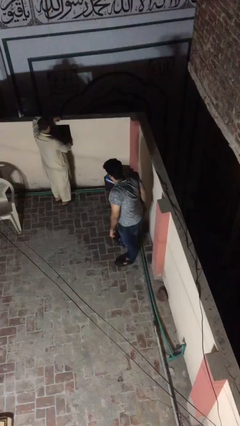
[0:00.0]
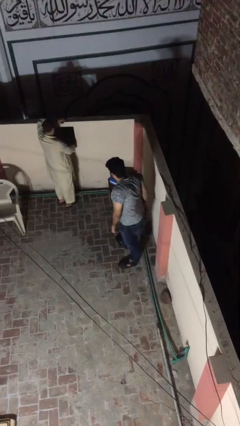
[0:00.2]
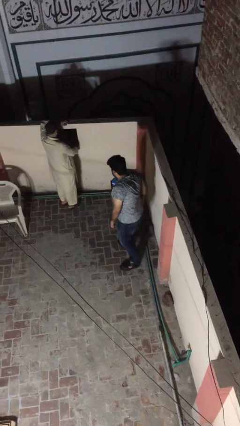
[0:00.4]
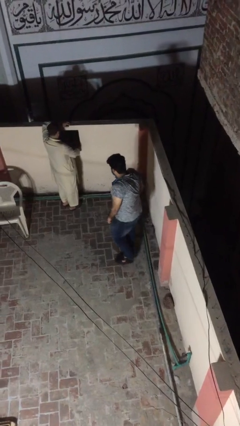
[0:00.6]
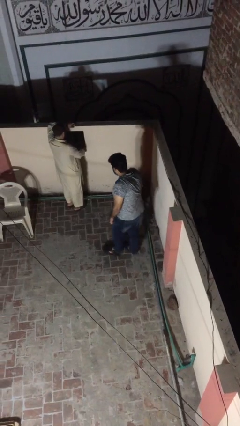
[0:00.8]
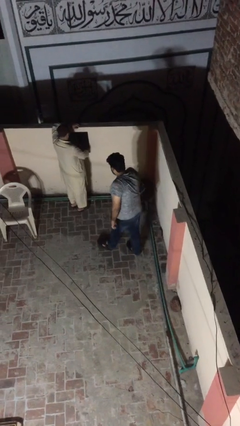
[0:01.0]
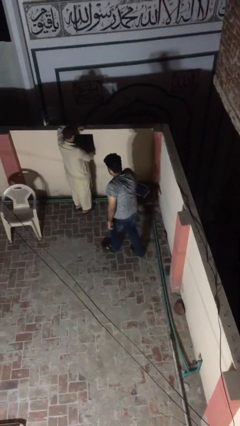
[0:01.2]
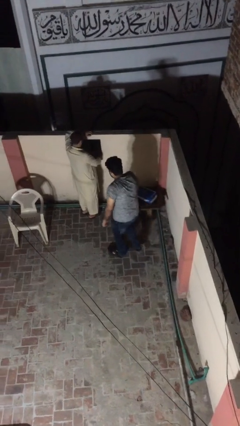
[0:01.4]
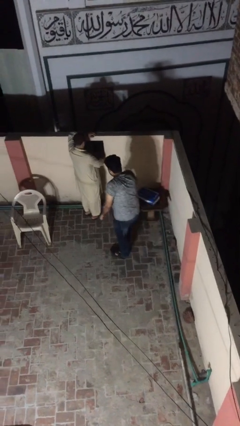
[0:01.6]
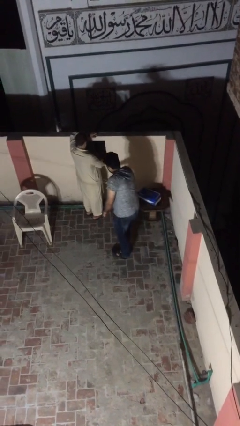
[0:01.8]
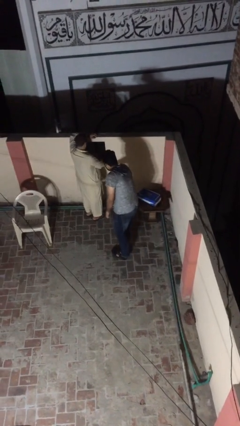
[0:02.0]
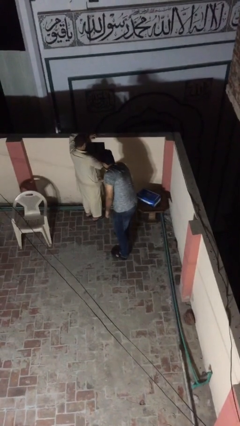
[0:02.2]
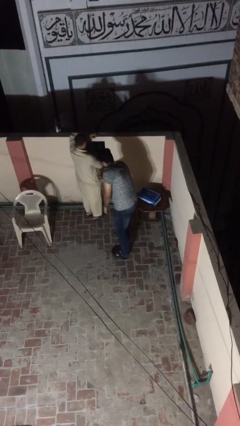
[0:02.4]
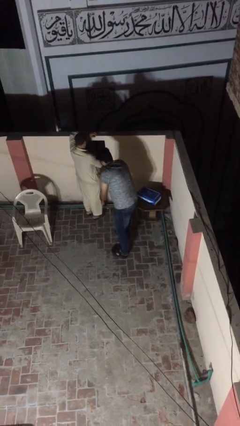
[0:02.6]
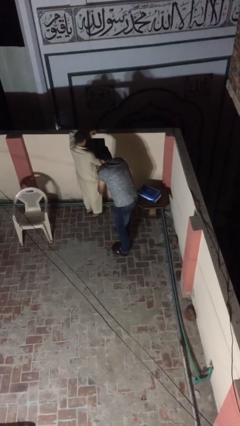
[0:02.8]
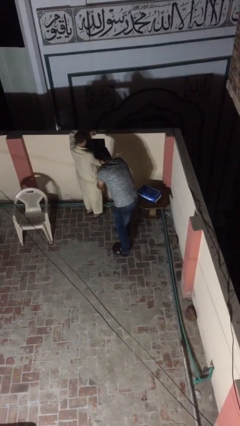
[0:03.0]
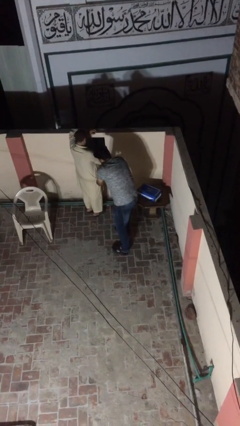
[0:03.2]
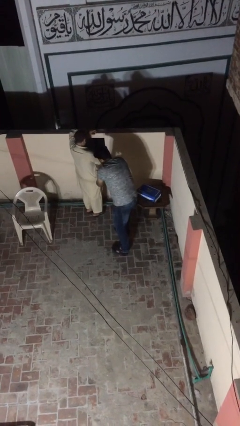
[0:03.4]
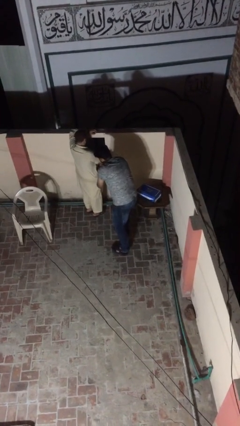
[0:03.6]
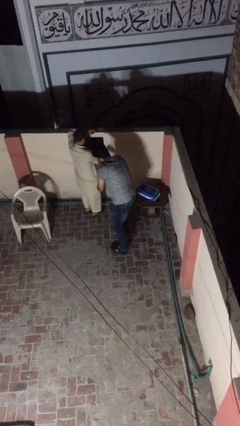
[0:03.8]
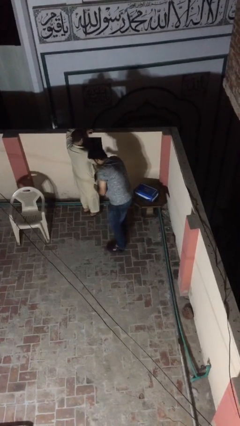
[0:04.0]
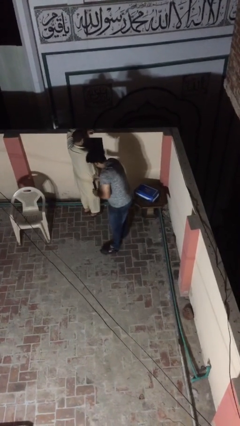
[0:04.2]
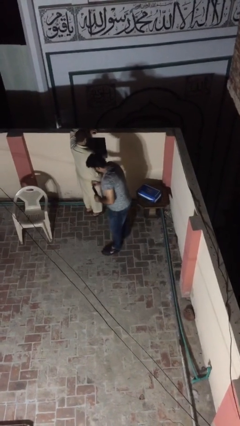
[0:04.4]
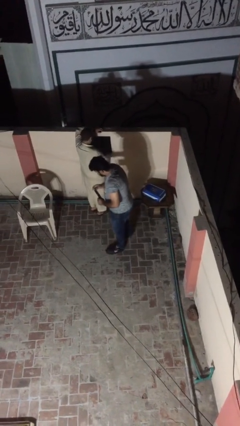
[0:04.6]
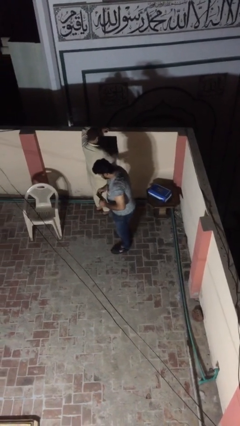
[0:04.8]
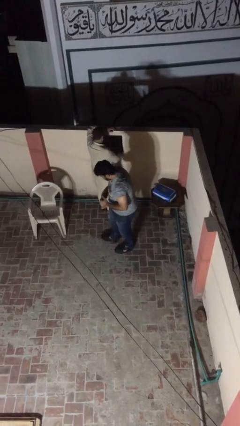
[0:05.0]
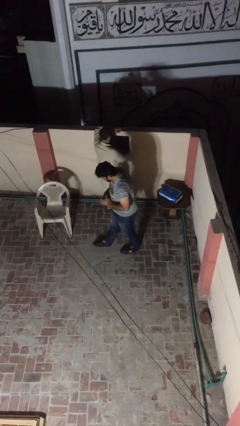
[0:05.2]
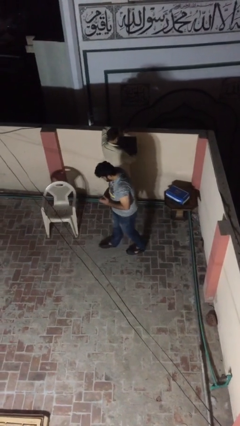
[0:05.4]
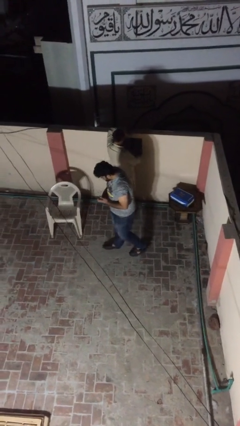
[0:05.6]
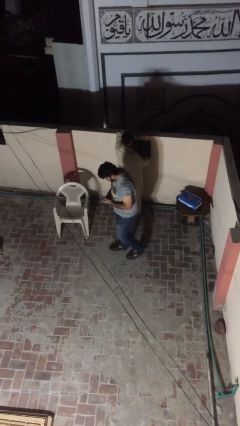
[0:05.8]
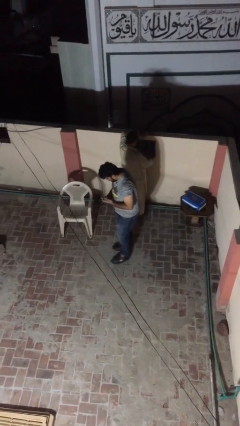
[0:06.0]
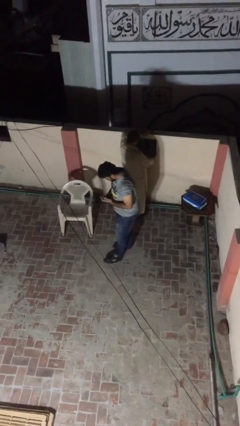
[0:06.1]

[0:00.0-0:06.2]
person steals object from person

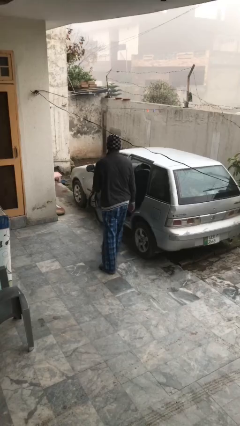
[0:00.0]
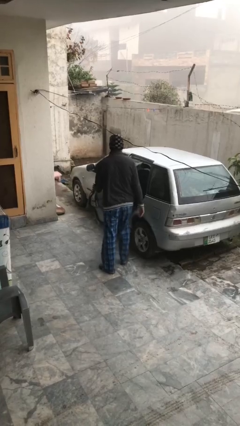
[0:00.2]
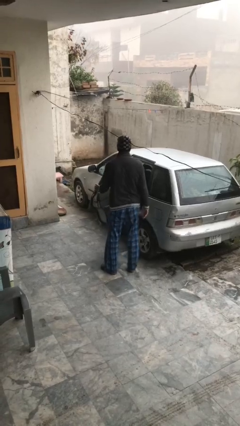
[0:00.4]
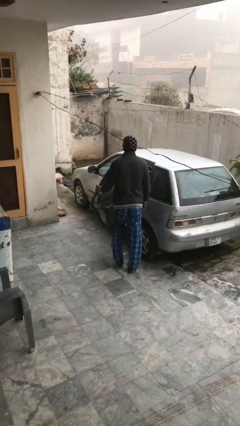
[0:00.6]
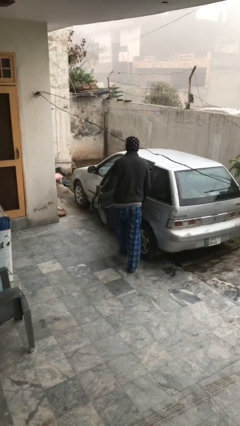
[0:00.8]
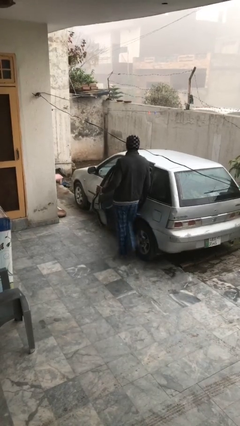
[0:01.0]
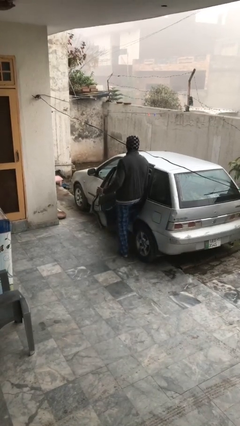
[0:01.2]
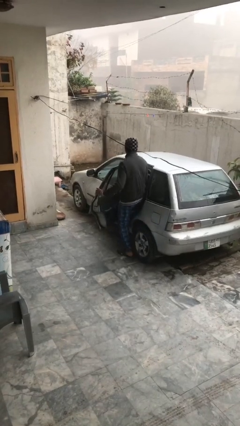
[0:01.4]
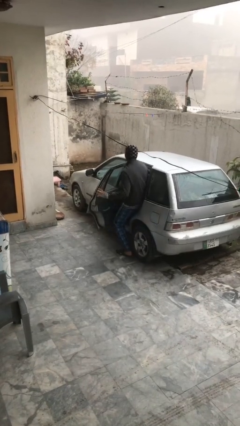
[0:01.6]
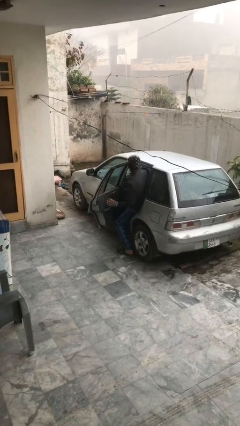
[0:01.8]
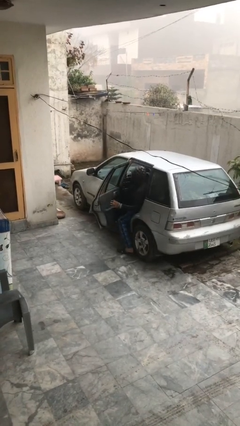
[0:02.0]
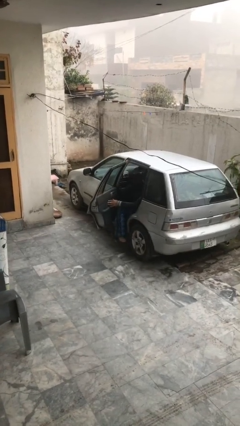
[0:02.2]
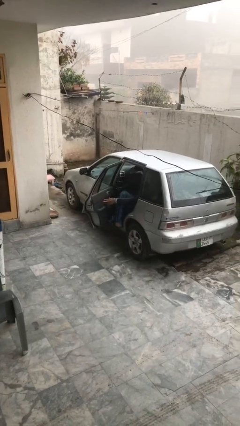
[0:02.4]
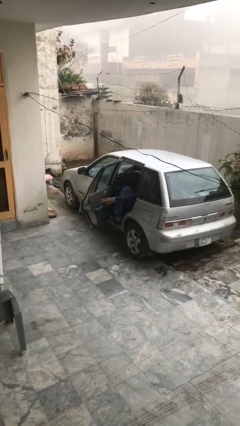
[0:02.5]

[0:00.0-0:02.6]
person enters car

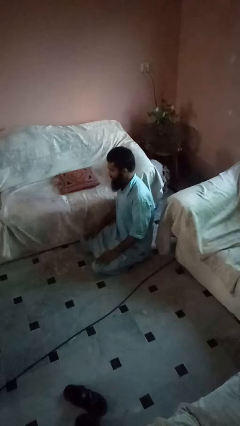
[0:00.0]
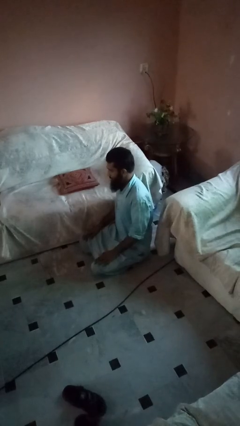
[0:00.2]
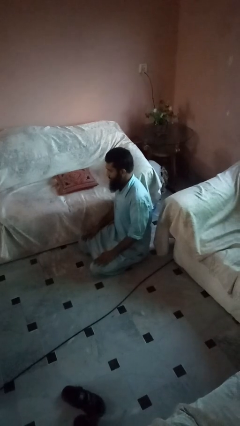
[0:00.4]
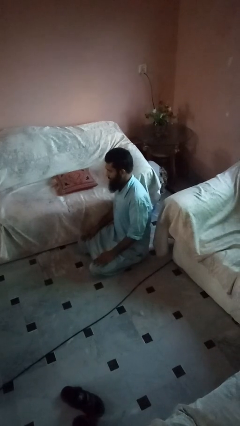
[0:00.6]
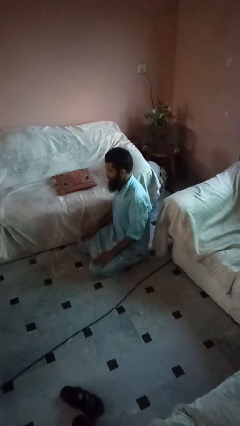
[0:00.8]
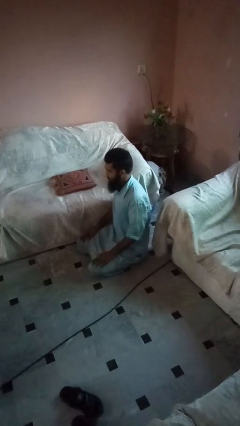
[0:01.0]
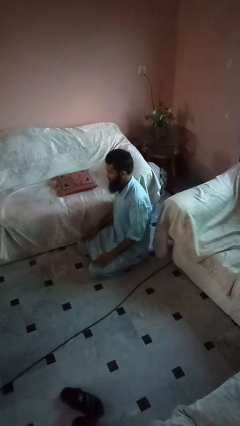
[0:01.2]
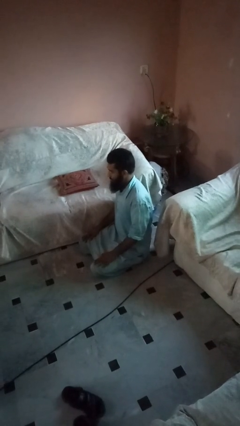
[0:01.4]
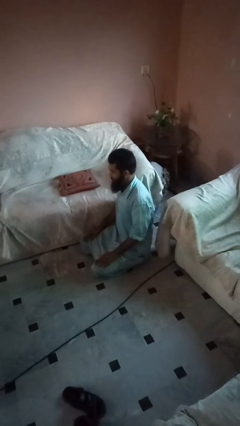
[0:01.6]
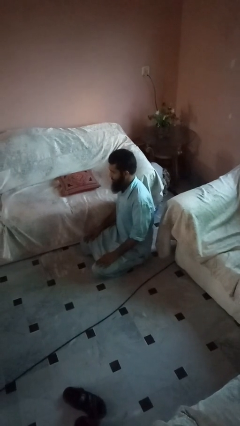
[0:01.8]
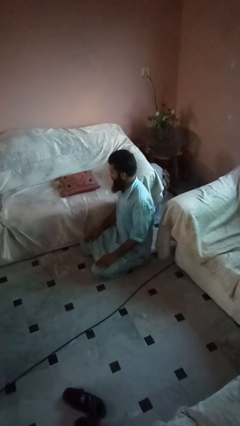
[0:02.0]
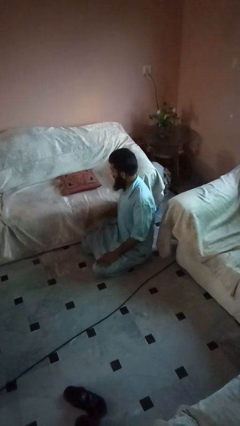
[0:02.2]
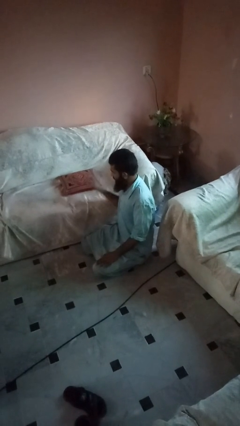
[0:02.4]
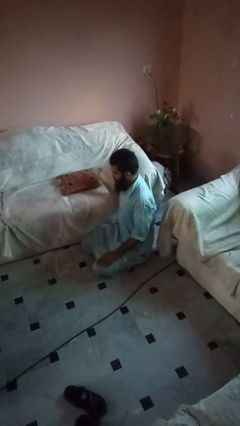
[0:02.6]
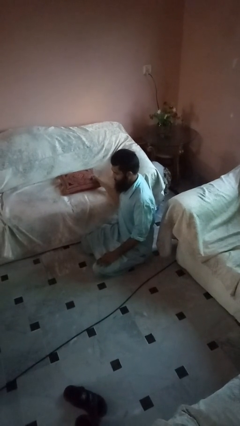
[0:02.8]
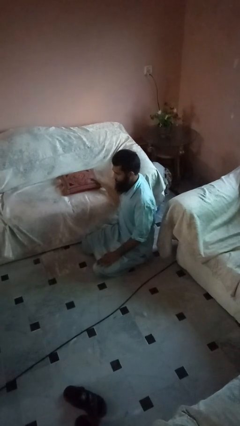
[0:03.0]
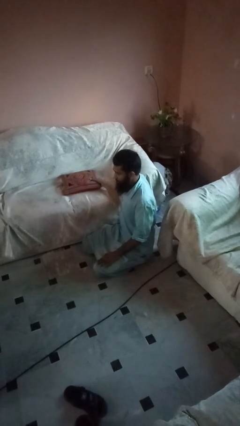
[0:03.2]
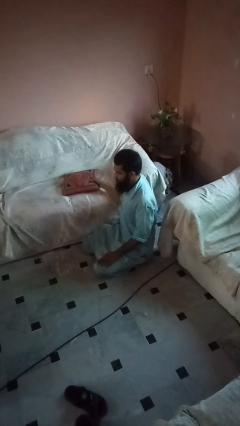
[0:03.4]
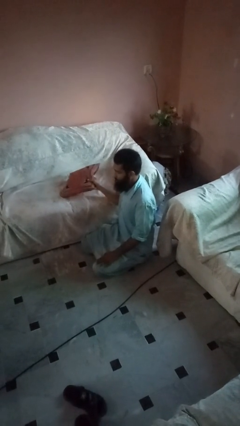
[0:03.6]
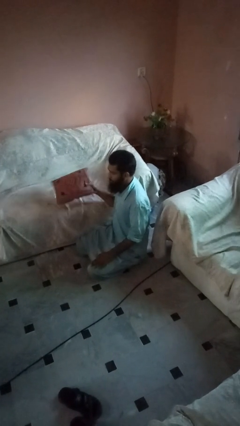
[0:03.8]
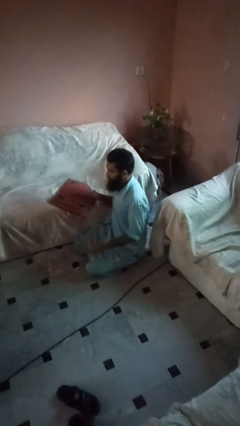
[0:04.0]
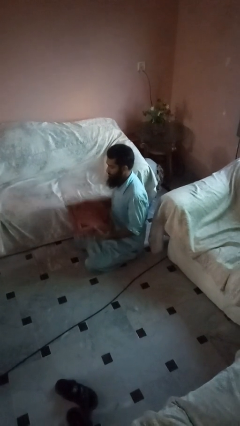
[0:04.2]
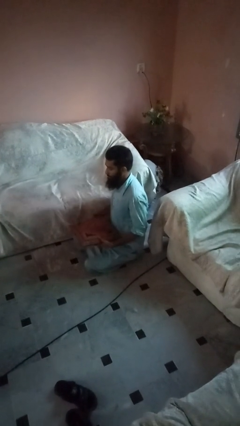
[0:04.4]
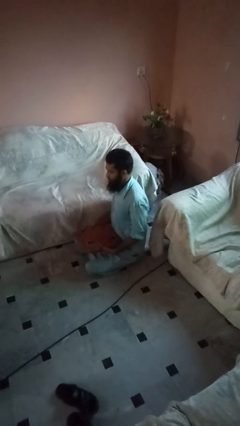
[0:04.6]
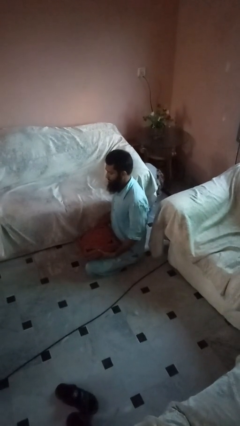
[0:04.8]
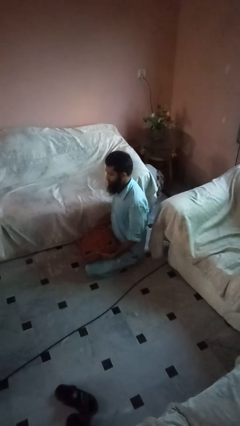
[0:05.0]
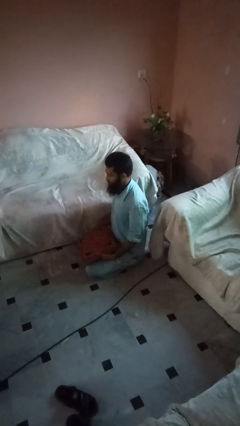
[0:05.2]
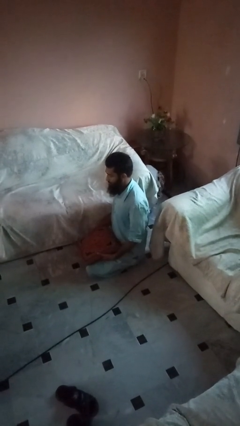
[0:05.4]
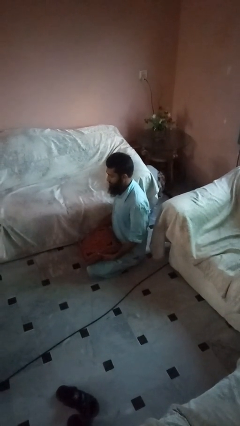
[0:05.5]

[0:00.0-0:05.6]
person picks up object from couch

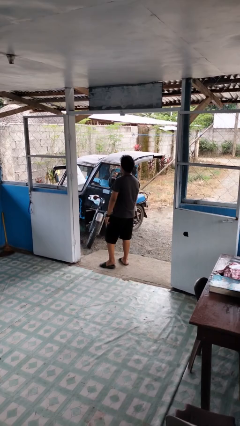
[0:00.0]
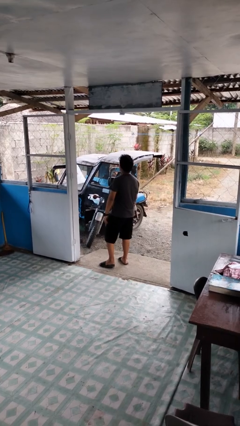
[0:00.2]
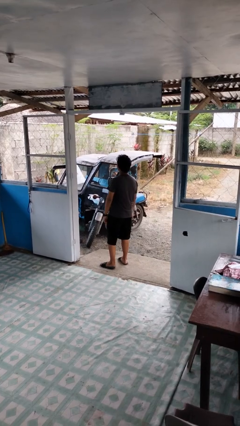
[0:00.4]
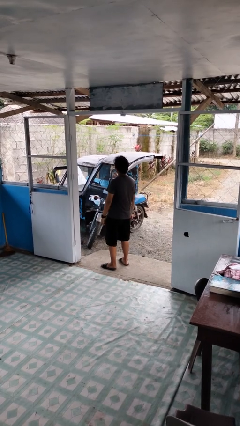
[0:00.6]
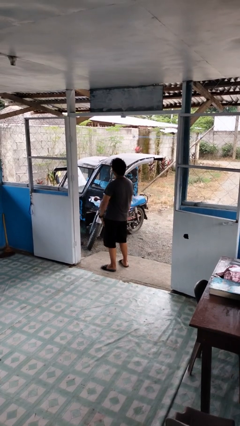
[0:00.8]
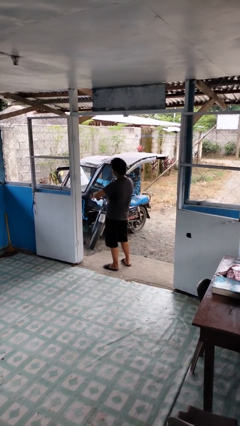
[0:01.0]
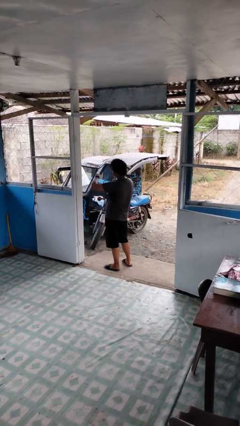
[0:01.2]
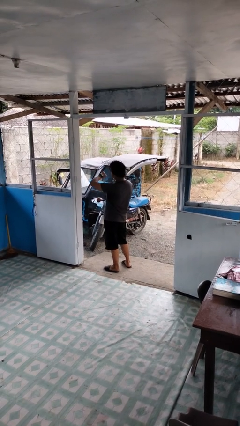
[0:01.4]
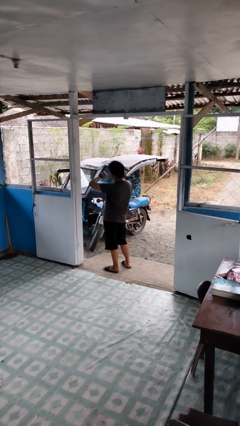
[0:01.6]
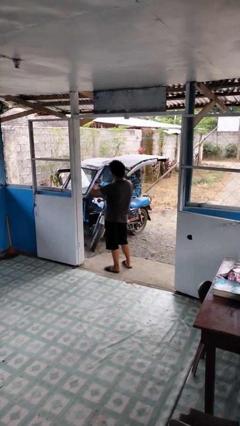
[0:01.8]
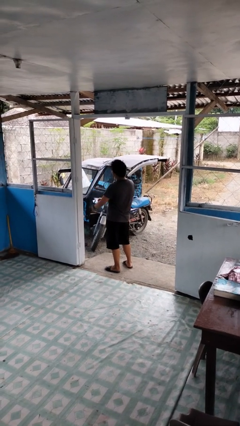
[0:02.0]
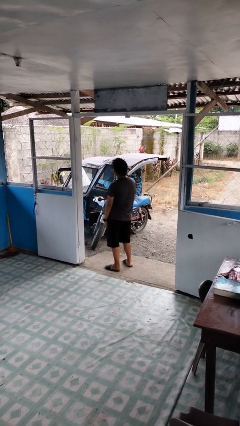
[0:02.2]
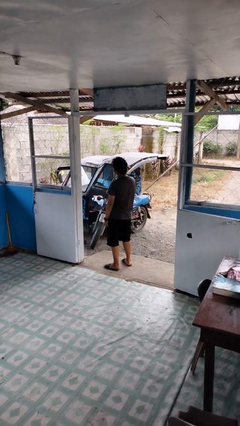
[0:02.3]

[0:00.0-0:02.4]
person looks at wristwatch

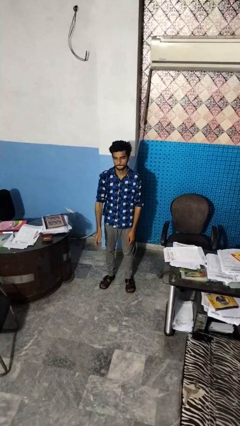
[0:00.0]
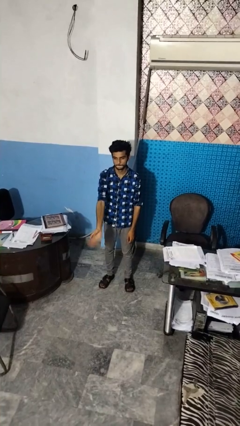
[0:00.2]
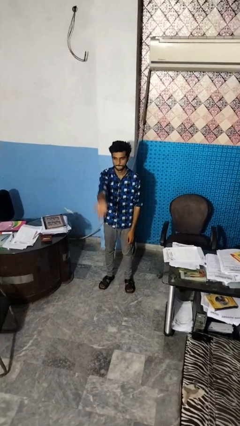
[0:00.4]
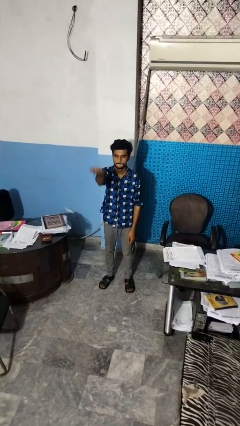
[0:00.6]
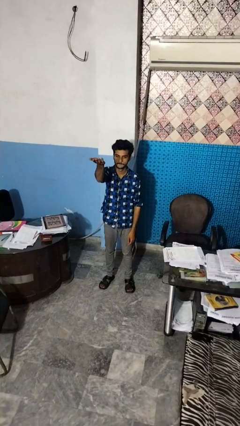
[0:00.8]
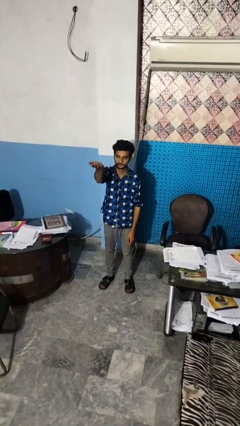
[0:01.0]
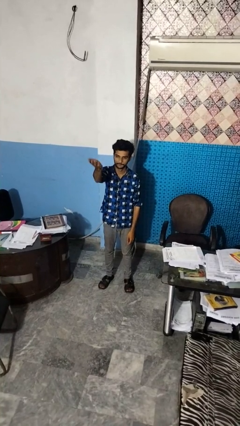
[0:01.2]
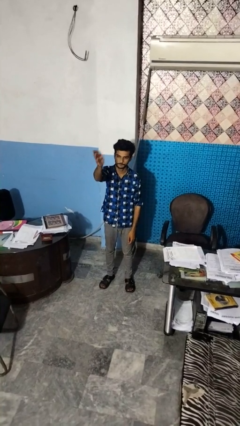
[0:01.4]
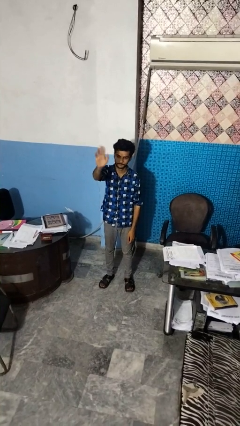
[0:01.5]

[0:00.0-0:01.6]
person gestures swipe up
